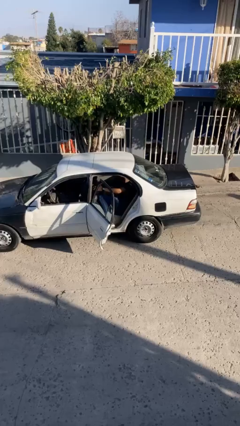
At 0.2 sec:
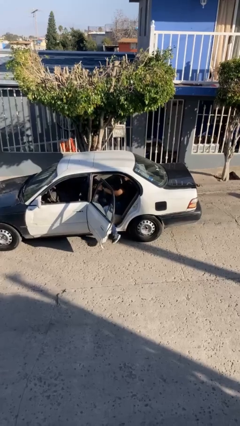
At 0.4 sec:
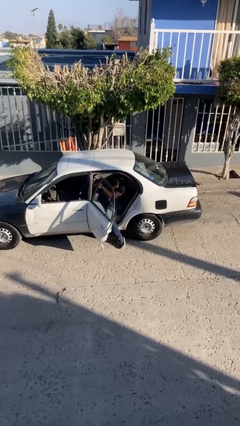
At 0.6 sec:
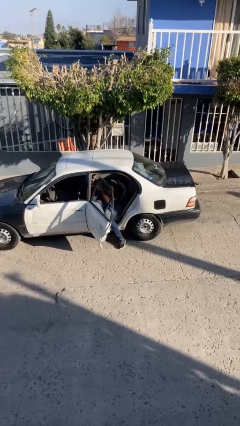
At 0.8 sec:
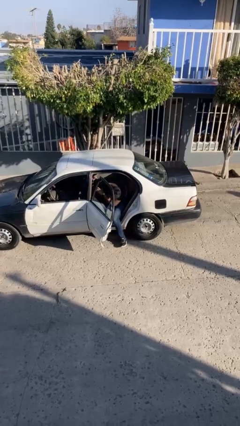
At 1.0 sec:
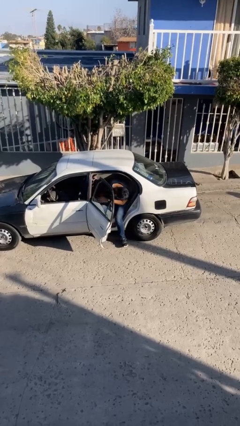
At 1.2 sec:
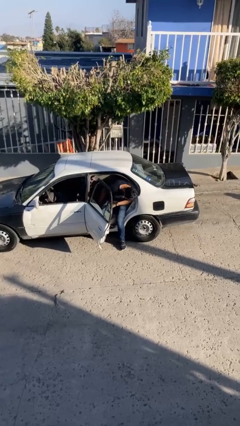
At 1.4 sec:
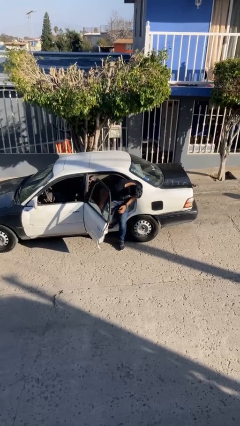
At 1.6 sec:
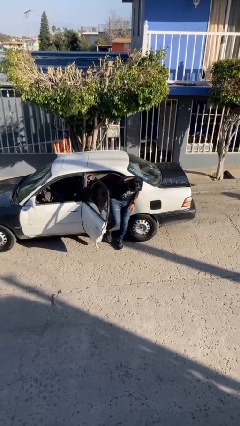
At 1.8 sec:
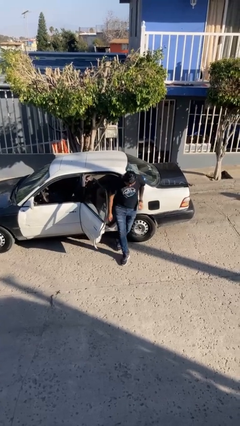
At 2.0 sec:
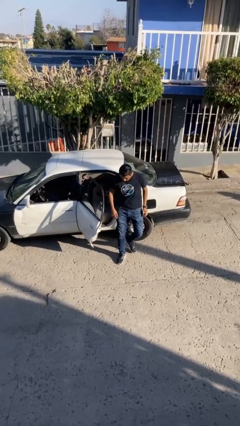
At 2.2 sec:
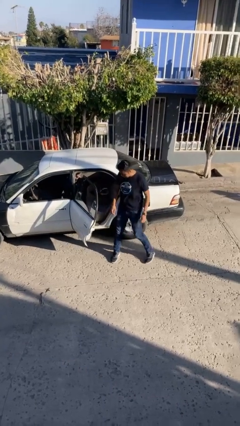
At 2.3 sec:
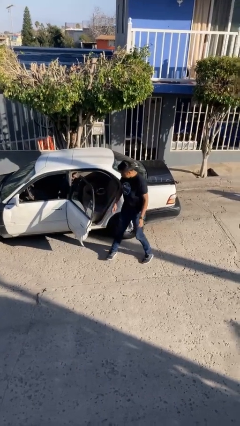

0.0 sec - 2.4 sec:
person exits car

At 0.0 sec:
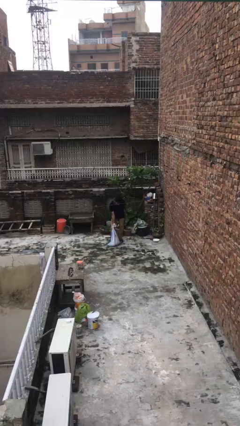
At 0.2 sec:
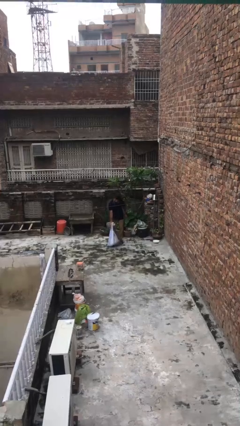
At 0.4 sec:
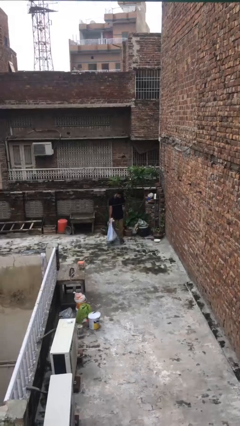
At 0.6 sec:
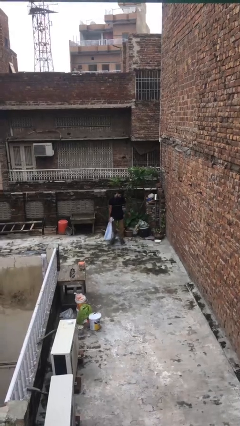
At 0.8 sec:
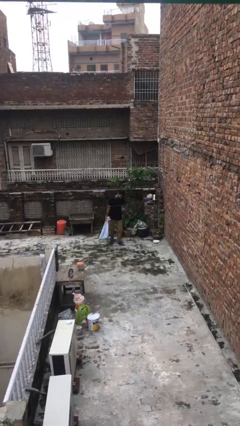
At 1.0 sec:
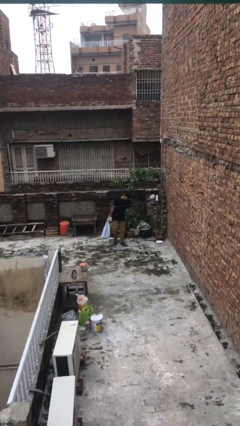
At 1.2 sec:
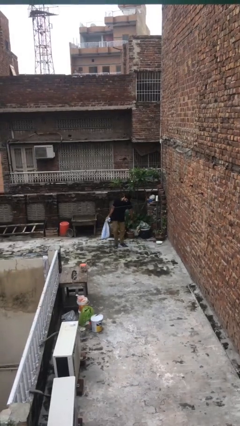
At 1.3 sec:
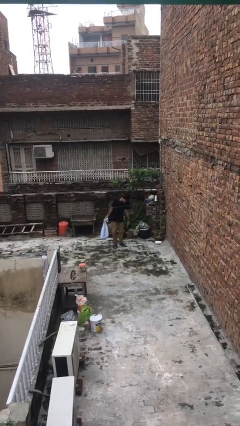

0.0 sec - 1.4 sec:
person picks up object from floor

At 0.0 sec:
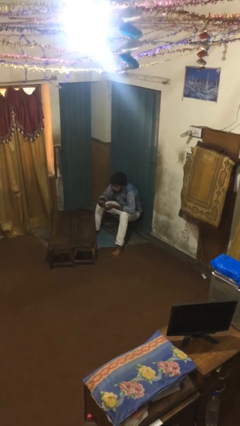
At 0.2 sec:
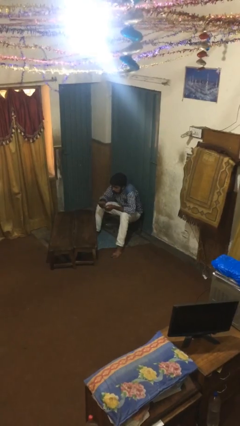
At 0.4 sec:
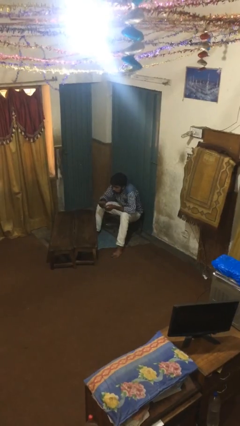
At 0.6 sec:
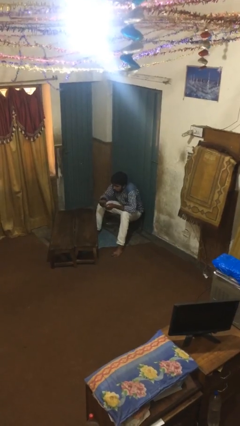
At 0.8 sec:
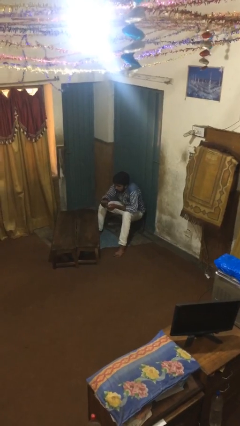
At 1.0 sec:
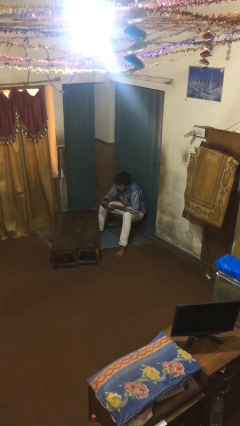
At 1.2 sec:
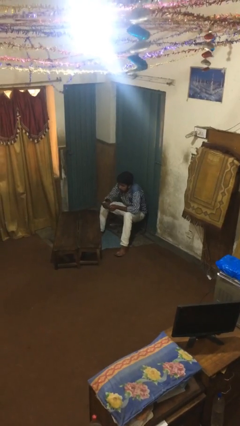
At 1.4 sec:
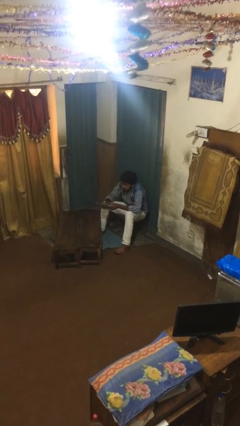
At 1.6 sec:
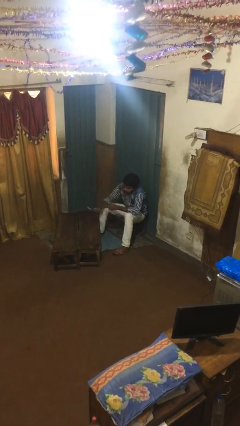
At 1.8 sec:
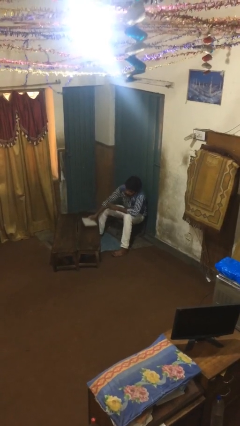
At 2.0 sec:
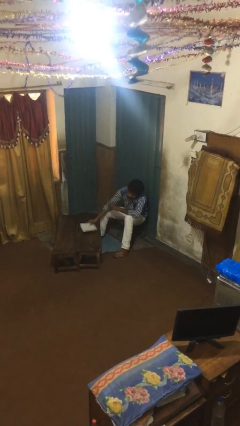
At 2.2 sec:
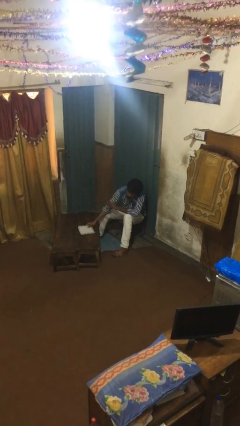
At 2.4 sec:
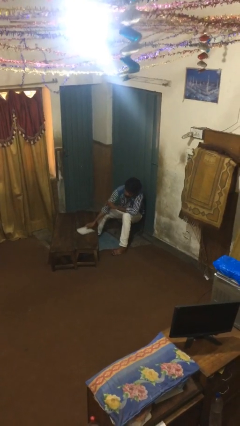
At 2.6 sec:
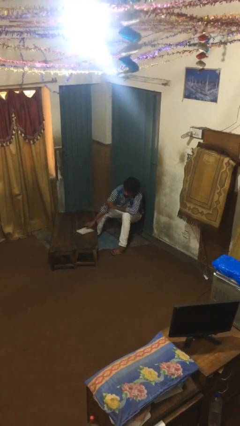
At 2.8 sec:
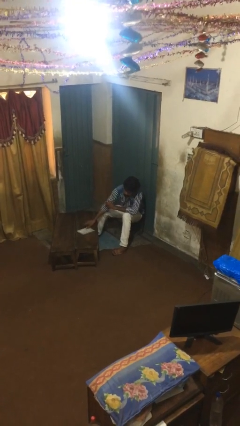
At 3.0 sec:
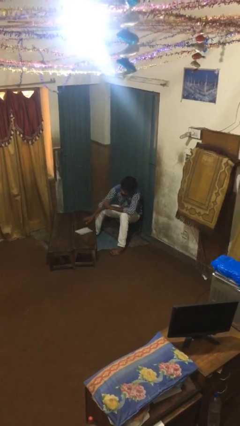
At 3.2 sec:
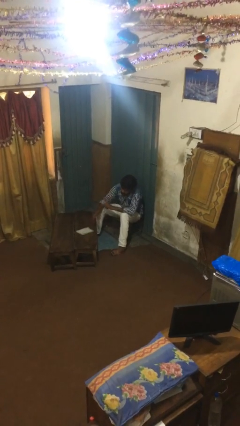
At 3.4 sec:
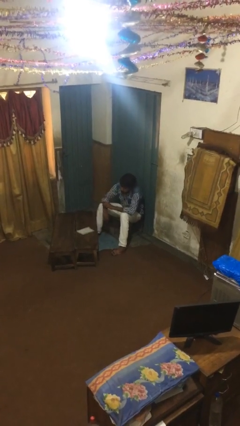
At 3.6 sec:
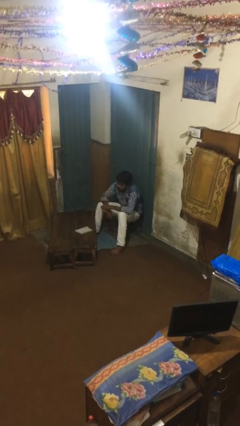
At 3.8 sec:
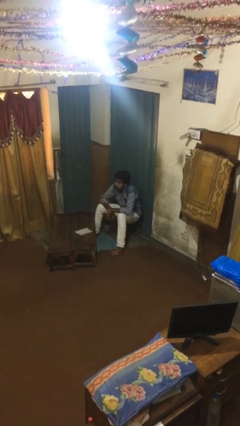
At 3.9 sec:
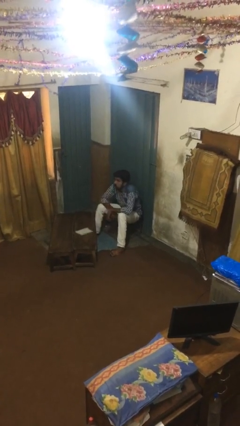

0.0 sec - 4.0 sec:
person puts down object on table

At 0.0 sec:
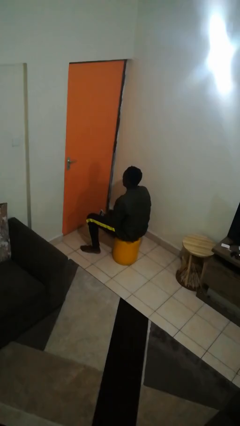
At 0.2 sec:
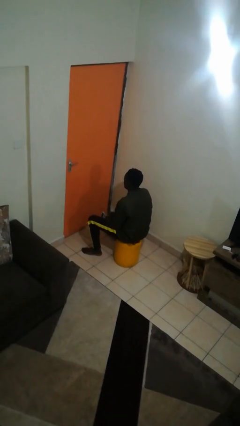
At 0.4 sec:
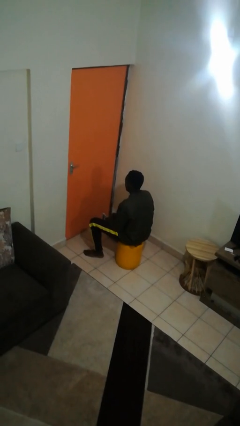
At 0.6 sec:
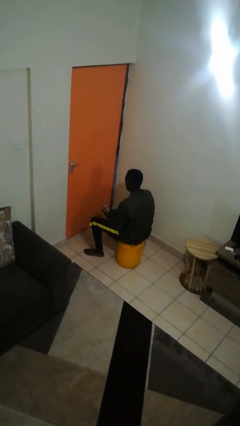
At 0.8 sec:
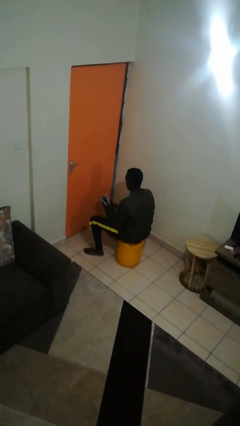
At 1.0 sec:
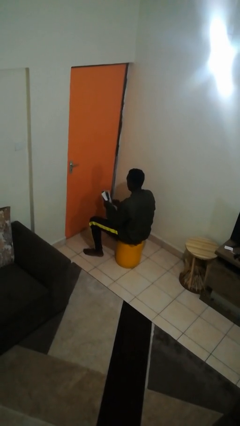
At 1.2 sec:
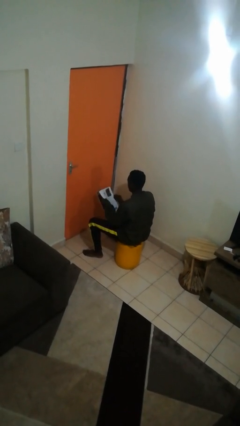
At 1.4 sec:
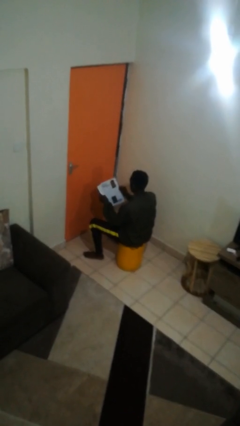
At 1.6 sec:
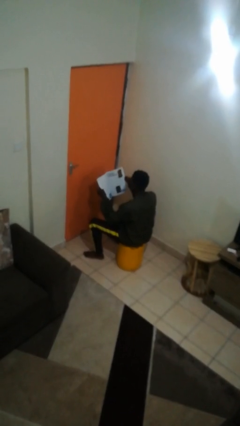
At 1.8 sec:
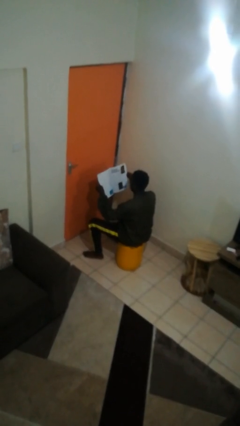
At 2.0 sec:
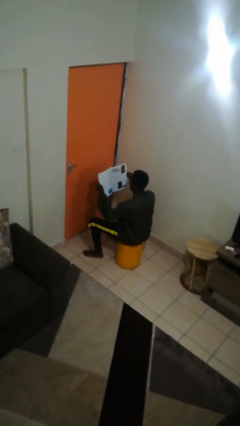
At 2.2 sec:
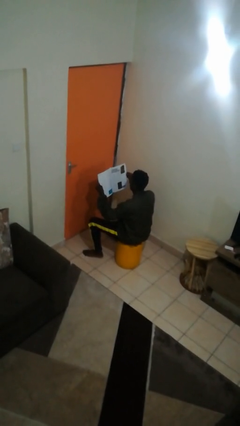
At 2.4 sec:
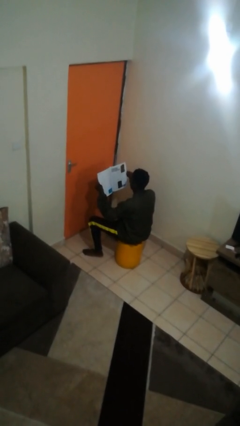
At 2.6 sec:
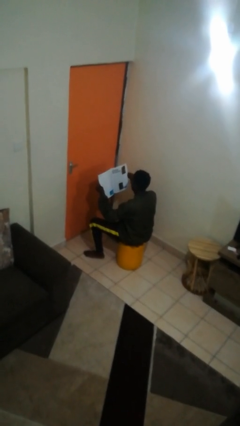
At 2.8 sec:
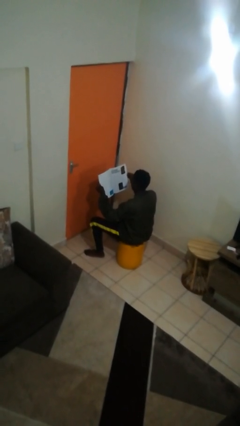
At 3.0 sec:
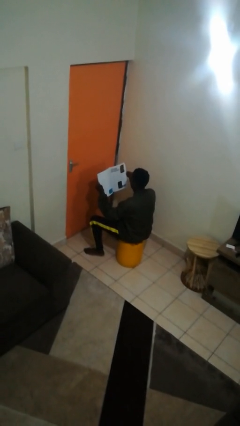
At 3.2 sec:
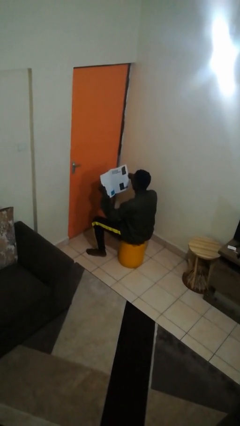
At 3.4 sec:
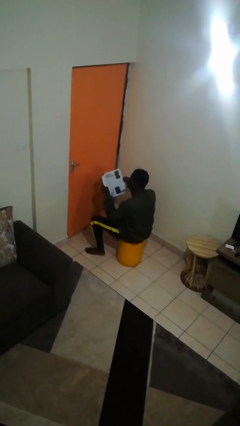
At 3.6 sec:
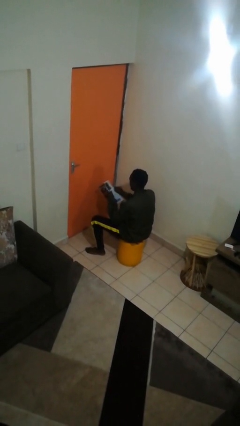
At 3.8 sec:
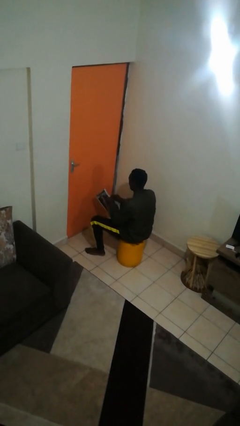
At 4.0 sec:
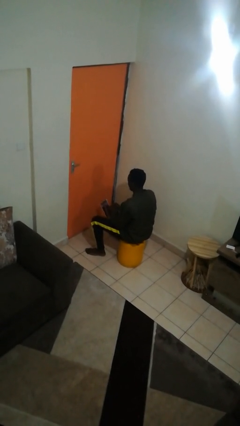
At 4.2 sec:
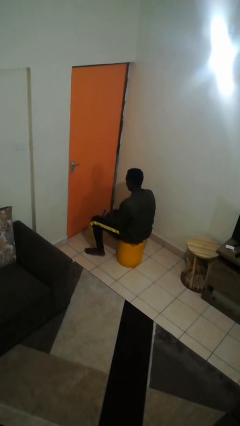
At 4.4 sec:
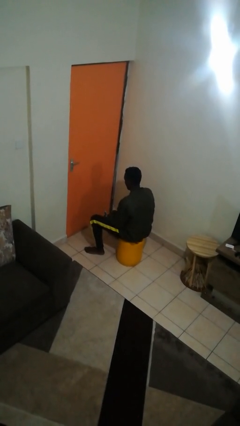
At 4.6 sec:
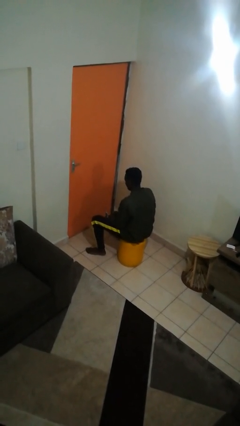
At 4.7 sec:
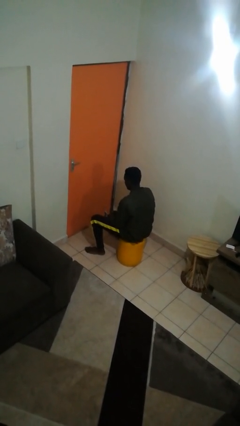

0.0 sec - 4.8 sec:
person reads magazine

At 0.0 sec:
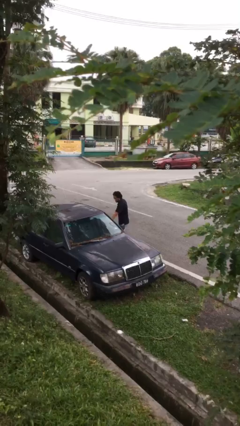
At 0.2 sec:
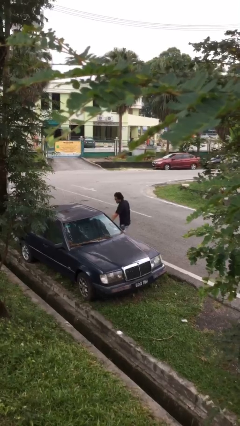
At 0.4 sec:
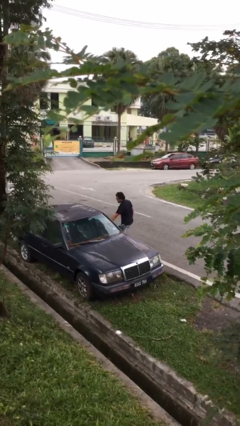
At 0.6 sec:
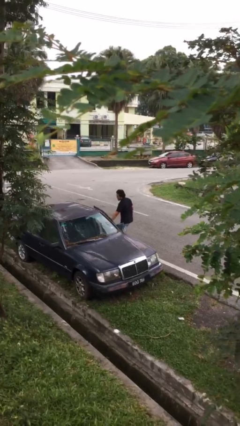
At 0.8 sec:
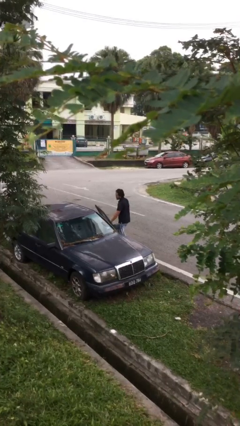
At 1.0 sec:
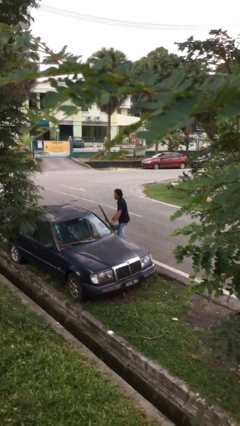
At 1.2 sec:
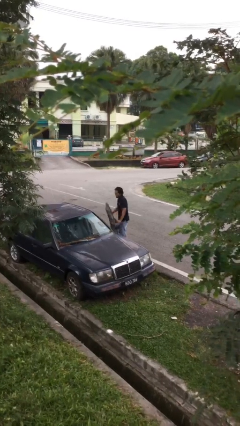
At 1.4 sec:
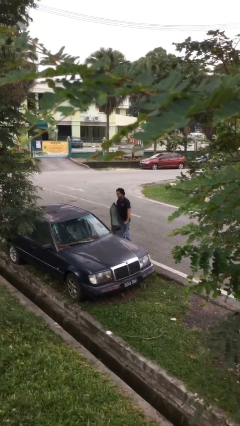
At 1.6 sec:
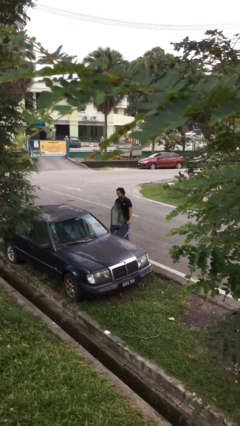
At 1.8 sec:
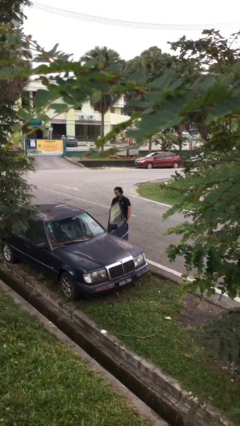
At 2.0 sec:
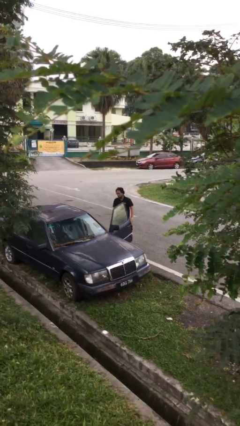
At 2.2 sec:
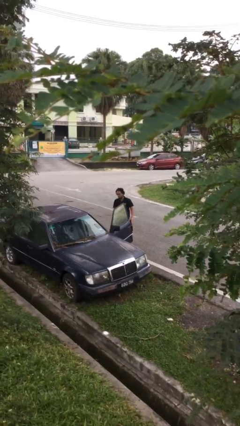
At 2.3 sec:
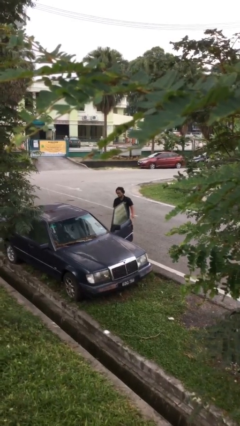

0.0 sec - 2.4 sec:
person opens car door

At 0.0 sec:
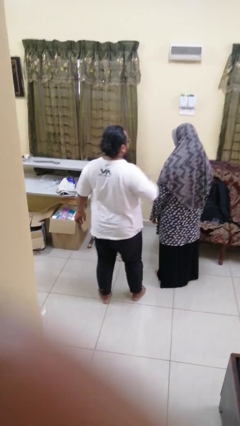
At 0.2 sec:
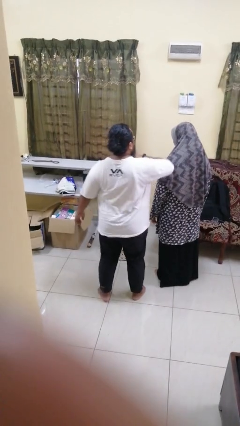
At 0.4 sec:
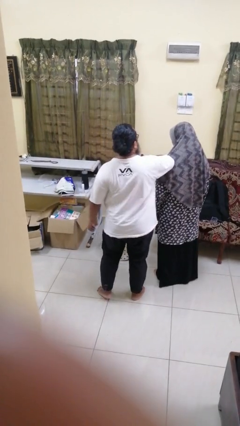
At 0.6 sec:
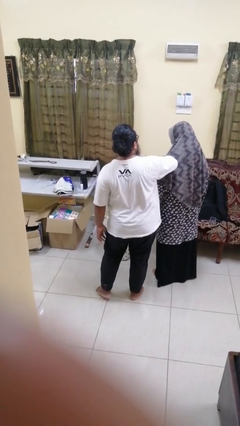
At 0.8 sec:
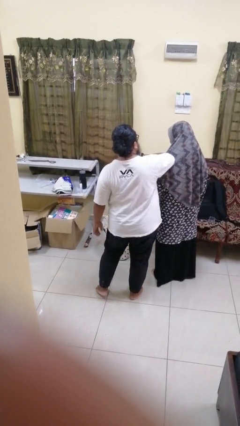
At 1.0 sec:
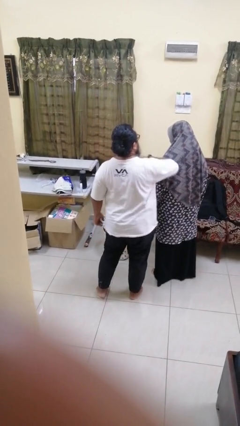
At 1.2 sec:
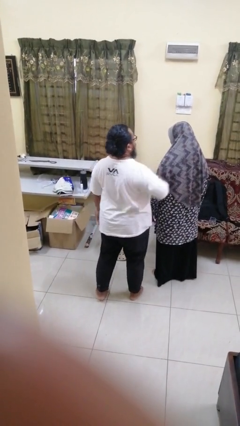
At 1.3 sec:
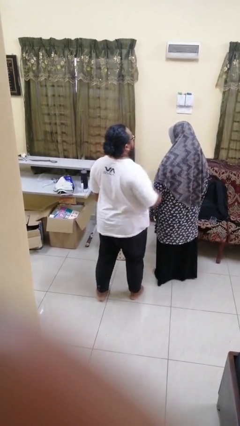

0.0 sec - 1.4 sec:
person nudges person with elbow

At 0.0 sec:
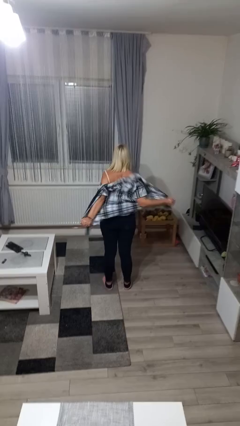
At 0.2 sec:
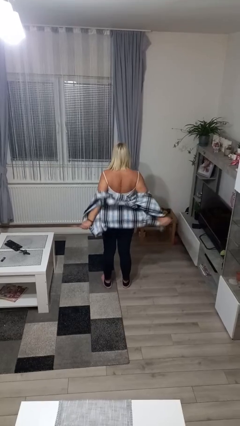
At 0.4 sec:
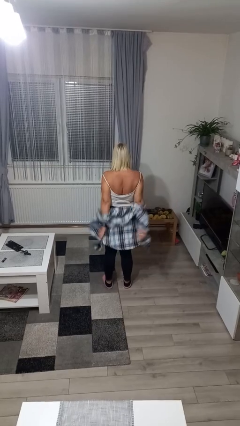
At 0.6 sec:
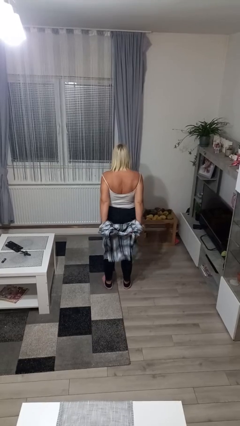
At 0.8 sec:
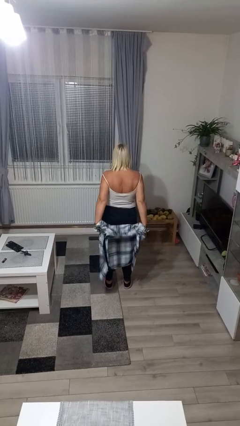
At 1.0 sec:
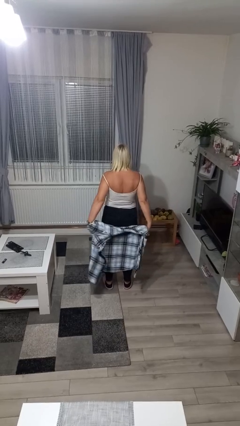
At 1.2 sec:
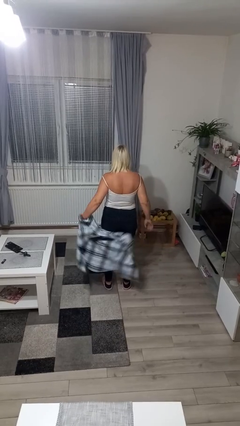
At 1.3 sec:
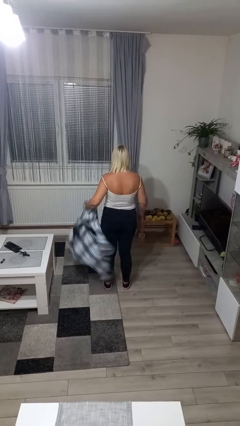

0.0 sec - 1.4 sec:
person takes off shirt
